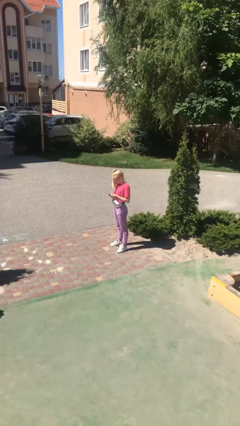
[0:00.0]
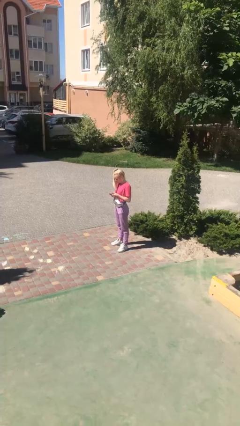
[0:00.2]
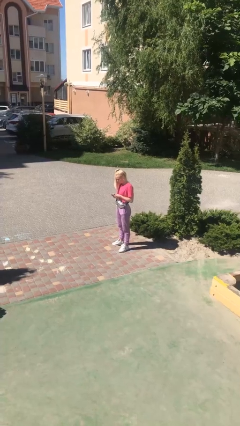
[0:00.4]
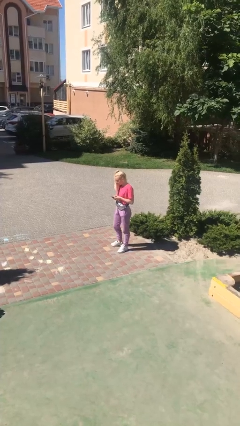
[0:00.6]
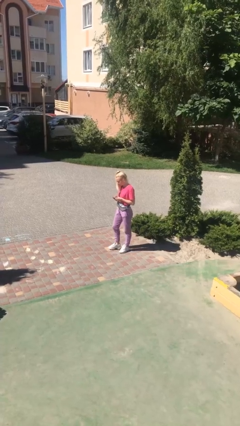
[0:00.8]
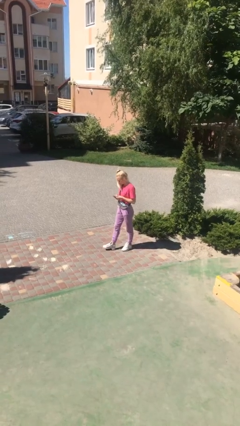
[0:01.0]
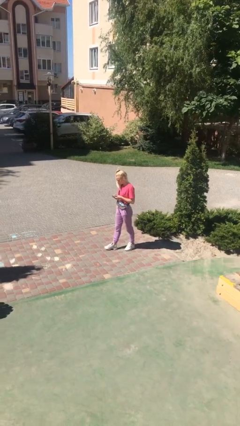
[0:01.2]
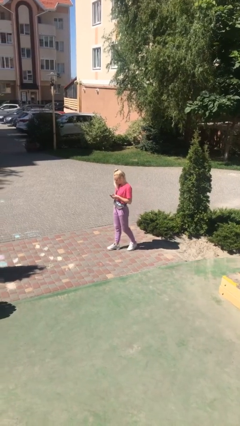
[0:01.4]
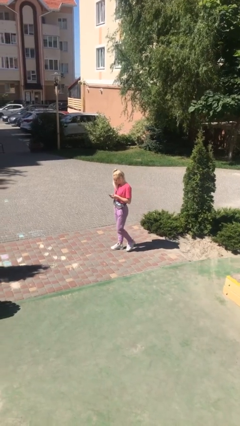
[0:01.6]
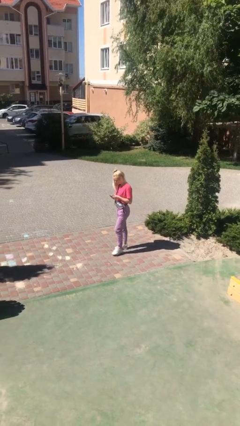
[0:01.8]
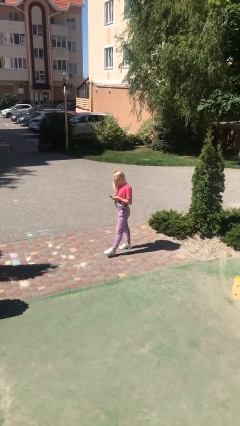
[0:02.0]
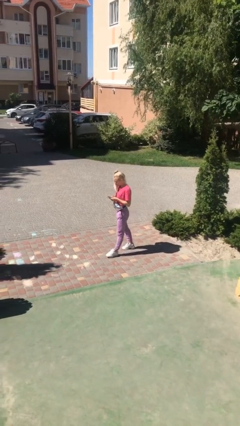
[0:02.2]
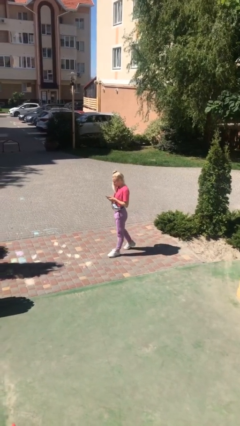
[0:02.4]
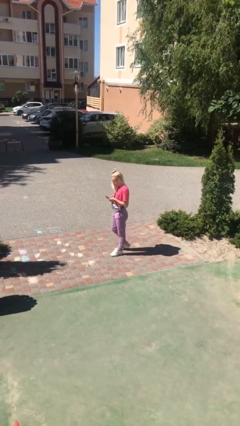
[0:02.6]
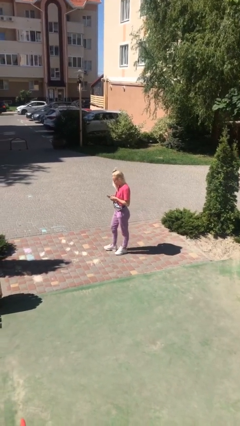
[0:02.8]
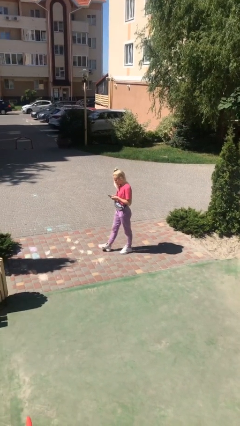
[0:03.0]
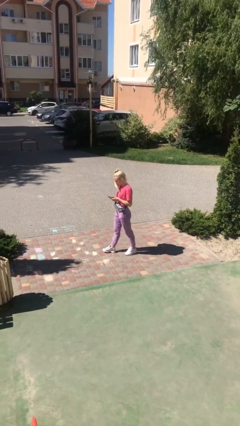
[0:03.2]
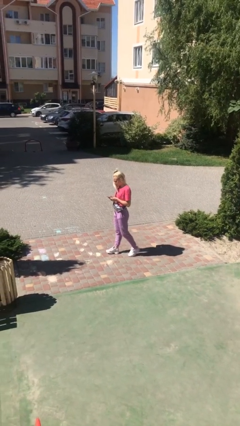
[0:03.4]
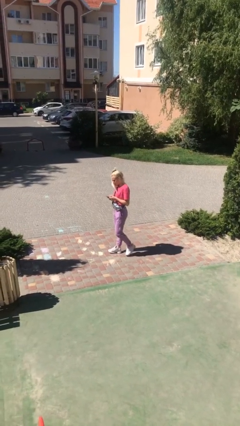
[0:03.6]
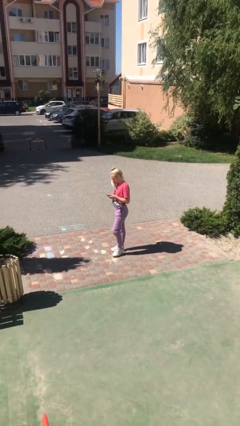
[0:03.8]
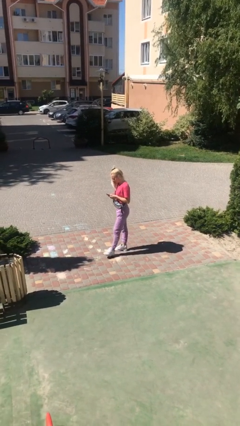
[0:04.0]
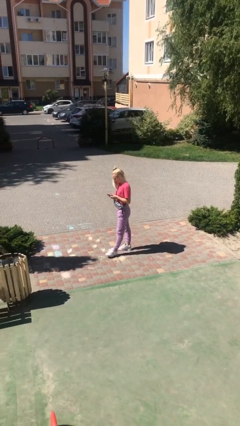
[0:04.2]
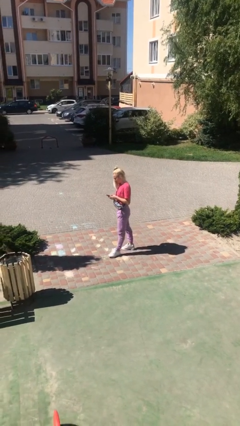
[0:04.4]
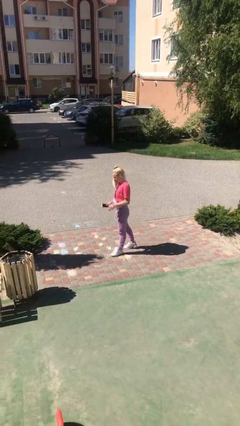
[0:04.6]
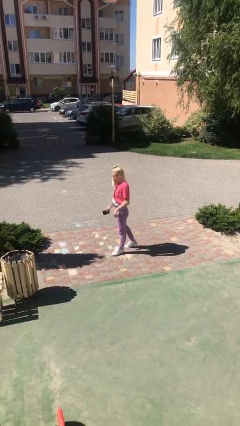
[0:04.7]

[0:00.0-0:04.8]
person texts on phone

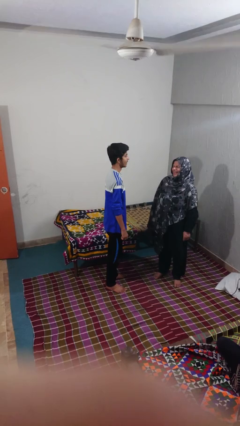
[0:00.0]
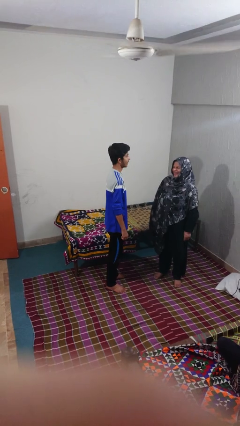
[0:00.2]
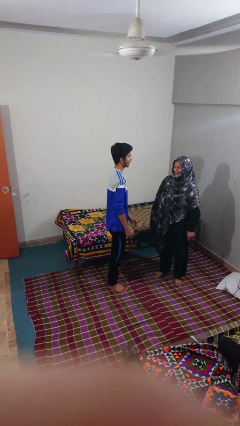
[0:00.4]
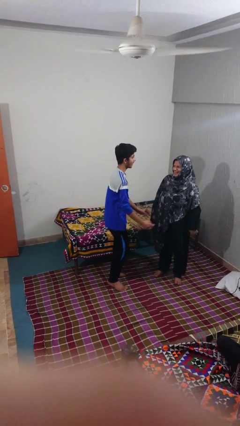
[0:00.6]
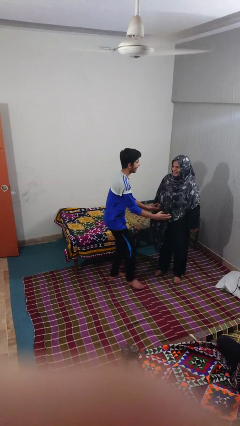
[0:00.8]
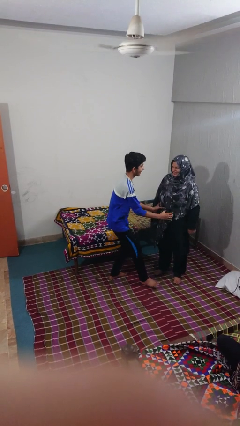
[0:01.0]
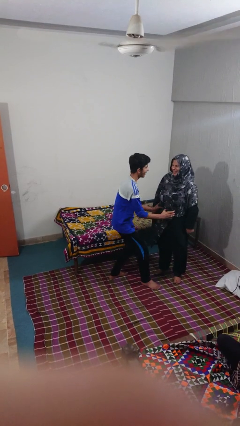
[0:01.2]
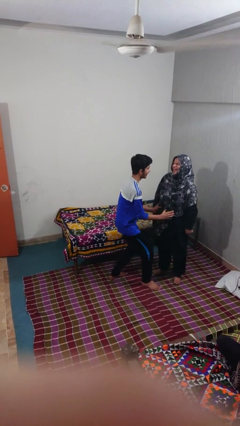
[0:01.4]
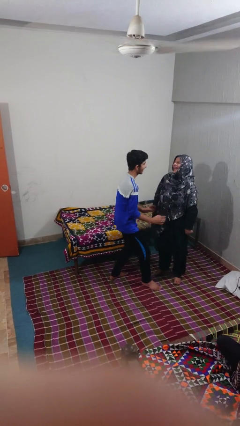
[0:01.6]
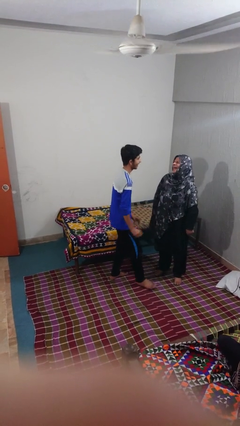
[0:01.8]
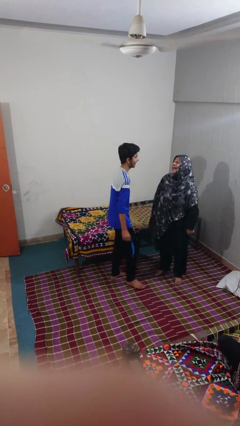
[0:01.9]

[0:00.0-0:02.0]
person tickles person

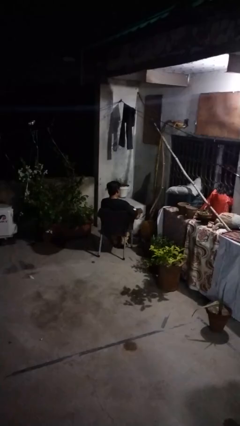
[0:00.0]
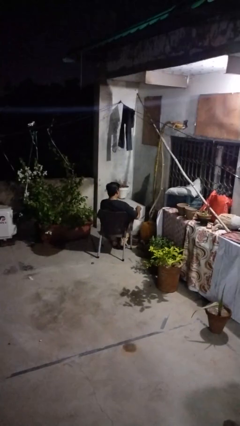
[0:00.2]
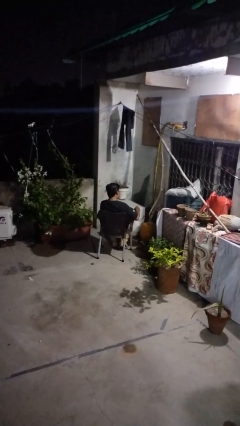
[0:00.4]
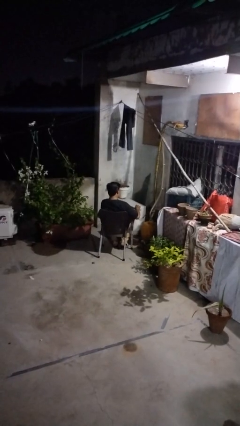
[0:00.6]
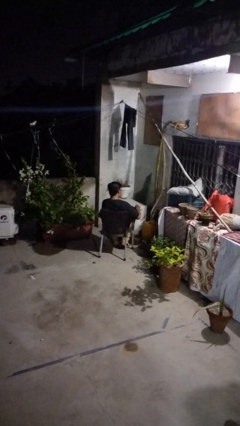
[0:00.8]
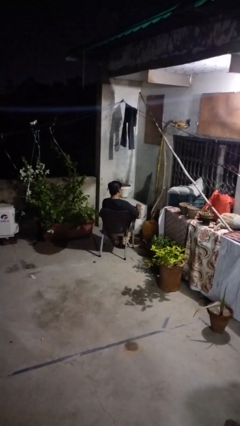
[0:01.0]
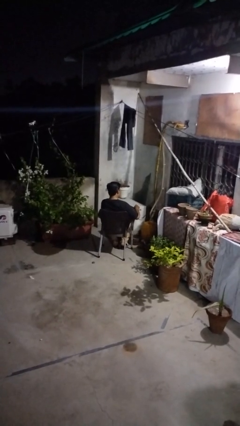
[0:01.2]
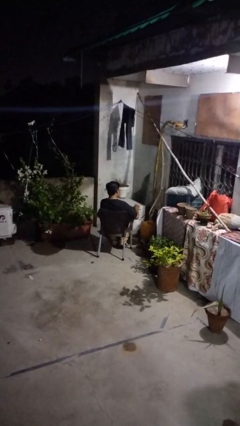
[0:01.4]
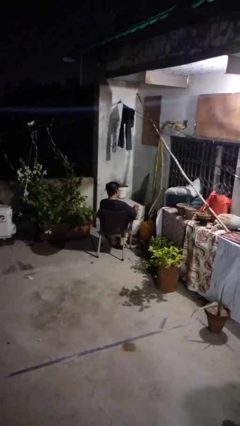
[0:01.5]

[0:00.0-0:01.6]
person stirs mug

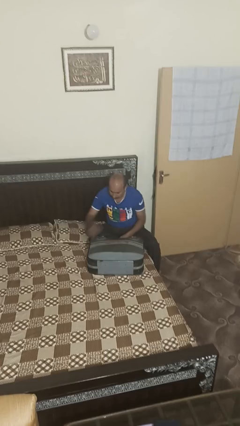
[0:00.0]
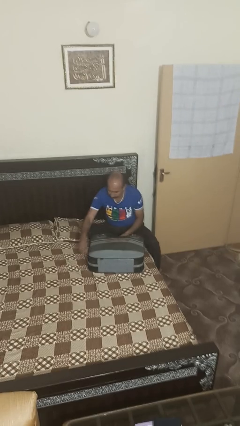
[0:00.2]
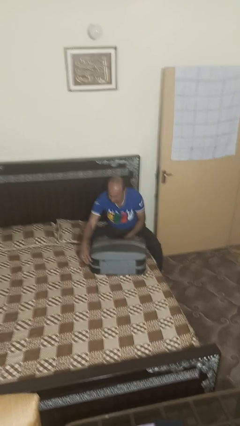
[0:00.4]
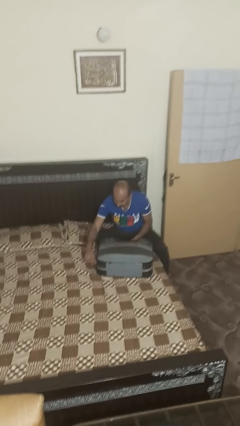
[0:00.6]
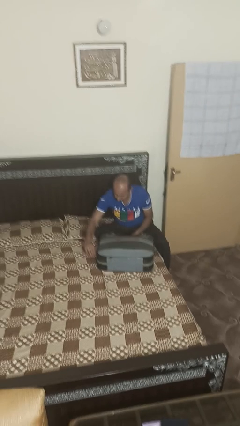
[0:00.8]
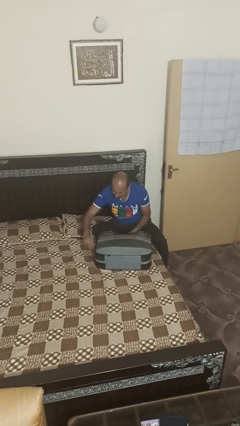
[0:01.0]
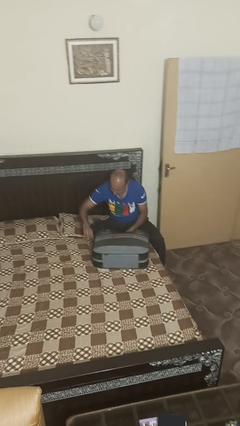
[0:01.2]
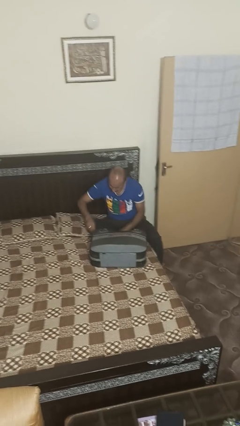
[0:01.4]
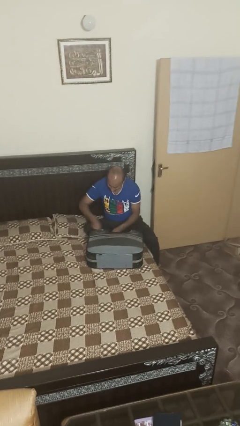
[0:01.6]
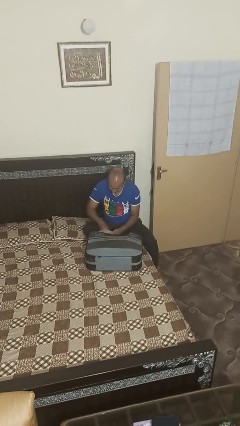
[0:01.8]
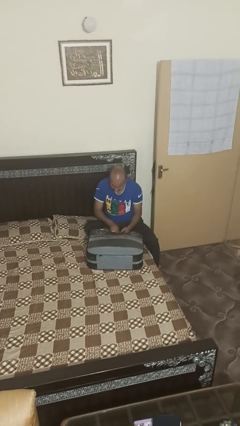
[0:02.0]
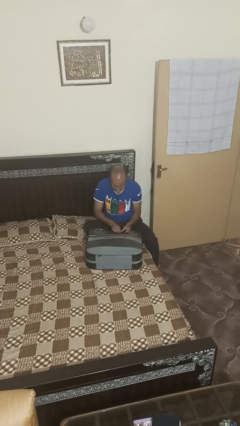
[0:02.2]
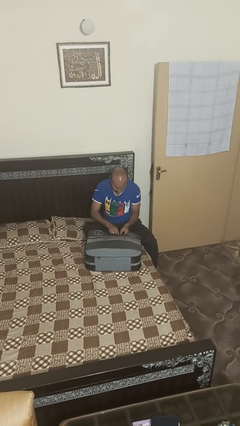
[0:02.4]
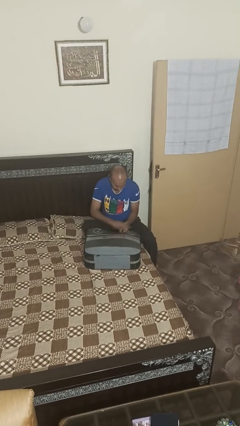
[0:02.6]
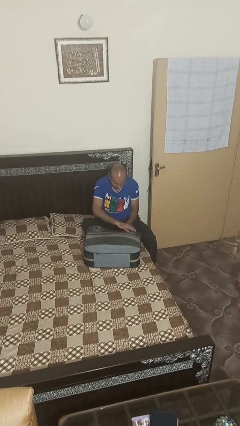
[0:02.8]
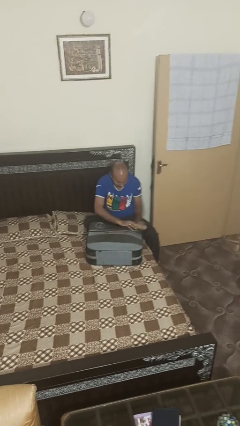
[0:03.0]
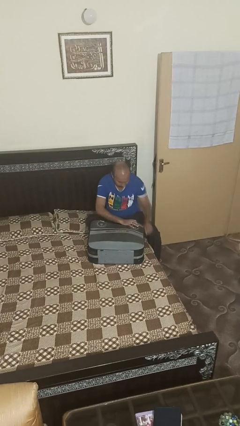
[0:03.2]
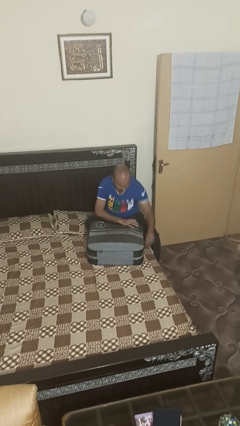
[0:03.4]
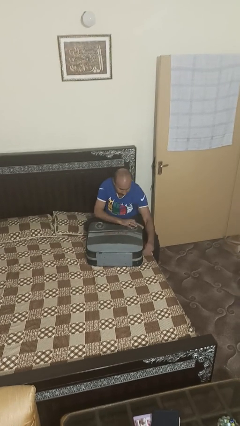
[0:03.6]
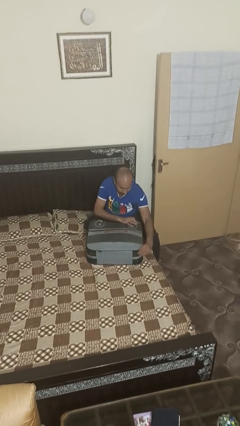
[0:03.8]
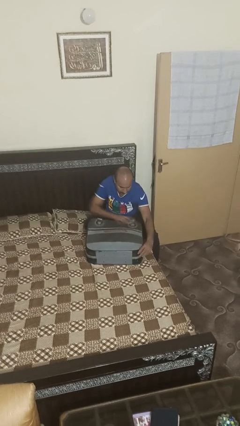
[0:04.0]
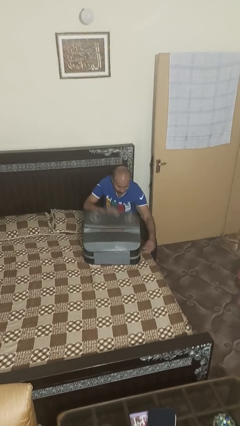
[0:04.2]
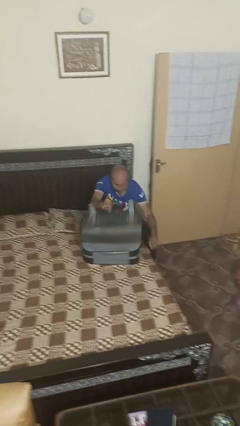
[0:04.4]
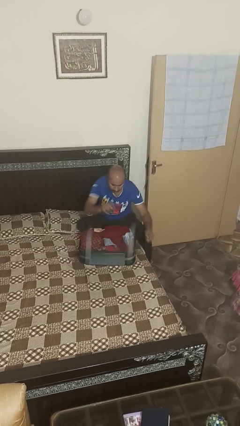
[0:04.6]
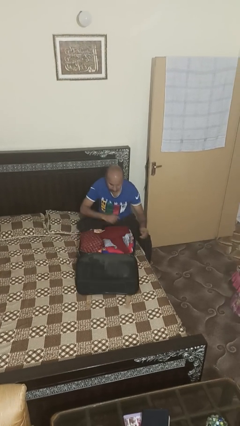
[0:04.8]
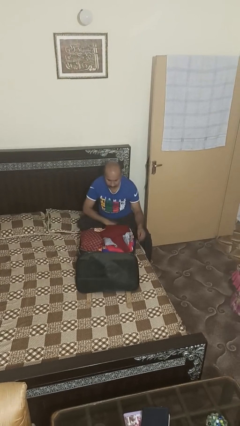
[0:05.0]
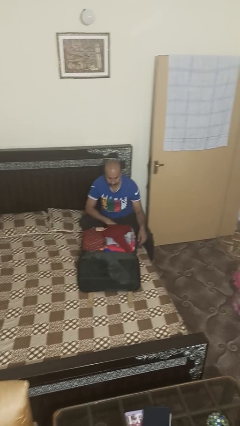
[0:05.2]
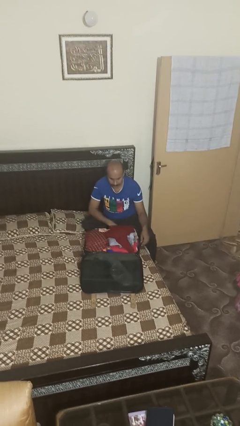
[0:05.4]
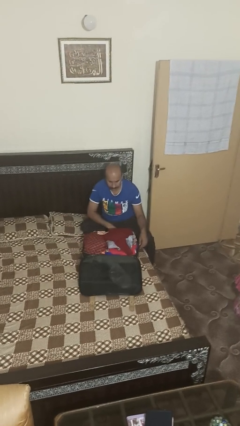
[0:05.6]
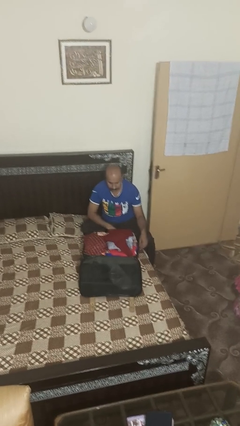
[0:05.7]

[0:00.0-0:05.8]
person opens suitcase

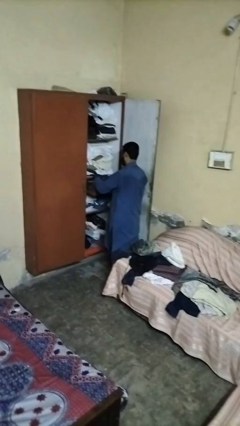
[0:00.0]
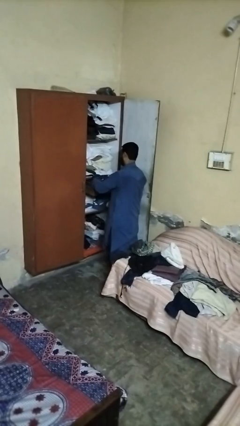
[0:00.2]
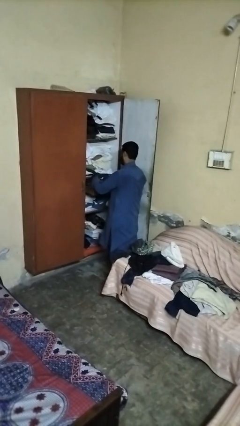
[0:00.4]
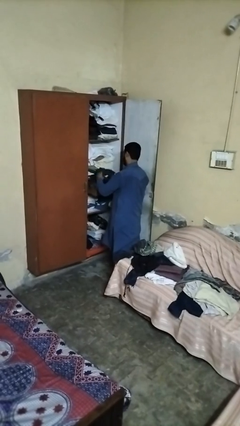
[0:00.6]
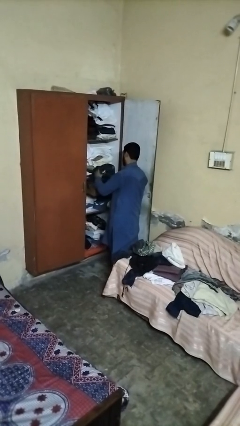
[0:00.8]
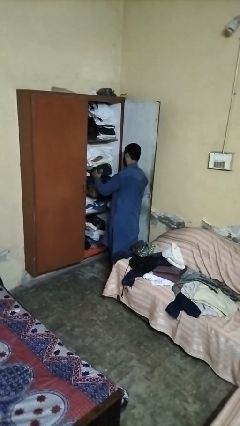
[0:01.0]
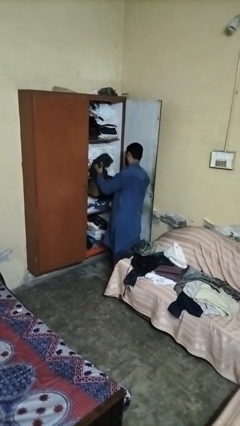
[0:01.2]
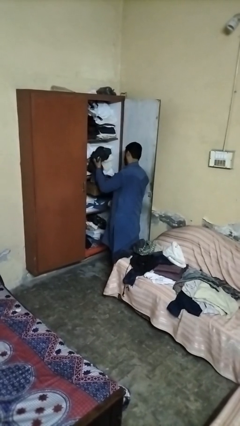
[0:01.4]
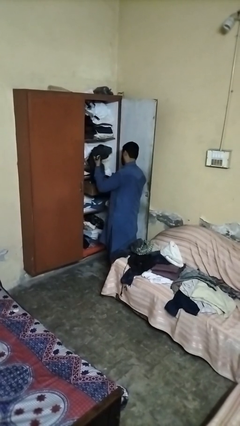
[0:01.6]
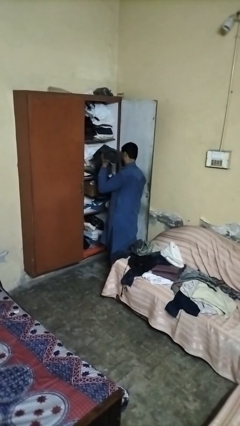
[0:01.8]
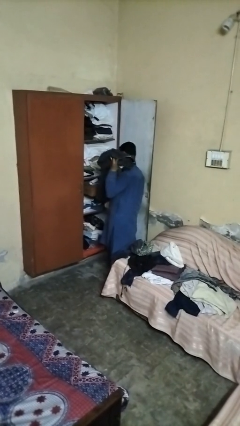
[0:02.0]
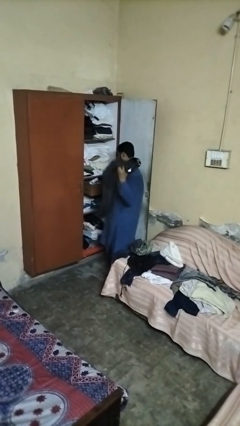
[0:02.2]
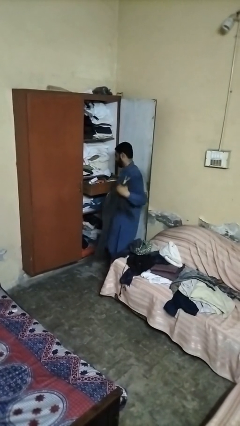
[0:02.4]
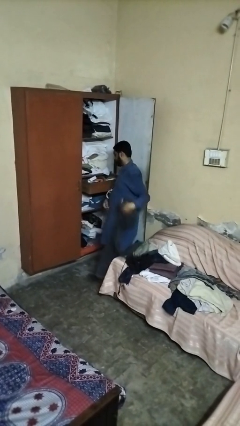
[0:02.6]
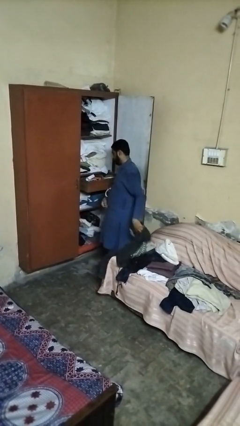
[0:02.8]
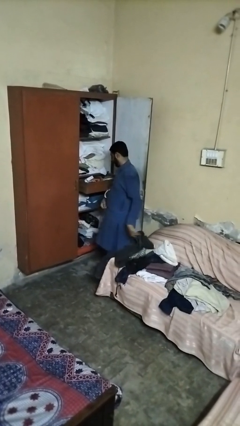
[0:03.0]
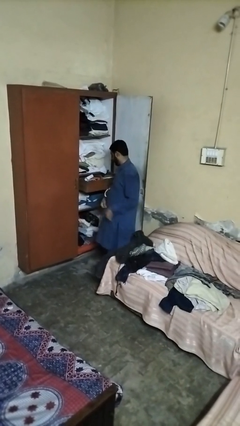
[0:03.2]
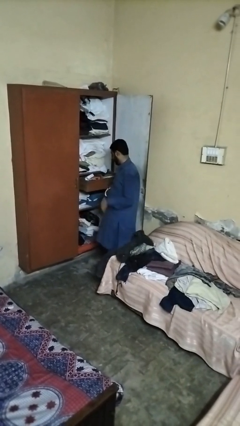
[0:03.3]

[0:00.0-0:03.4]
person takes clothes from dresser
